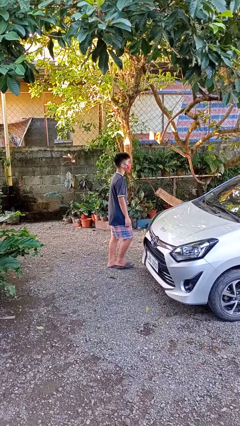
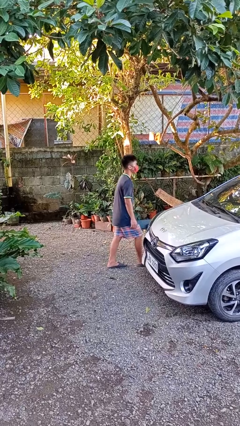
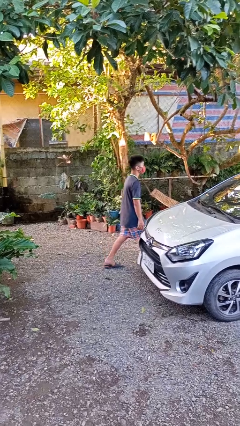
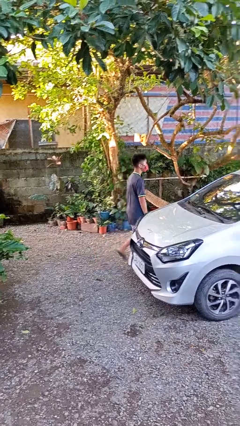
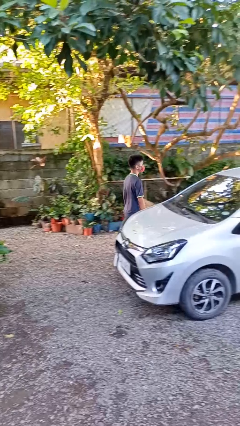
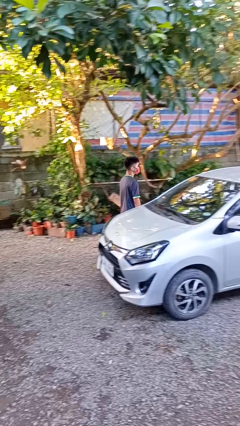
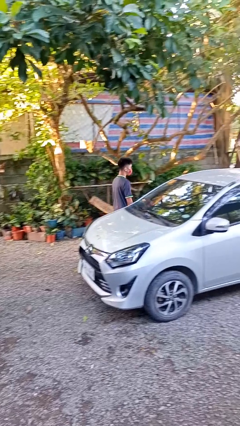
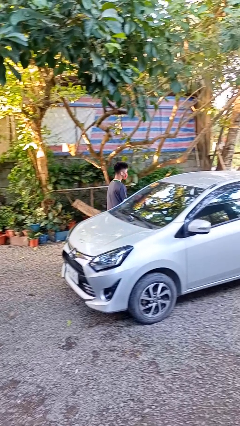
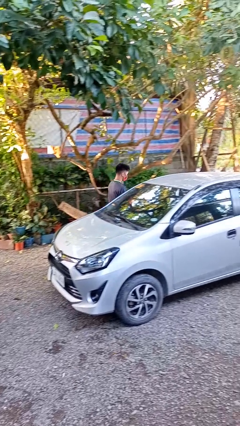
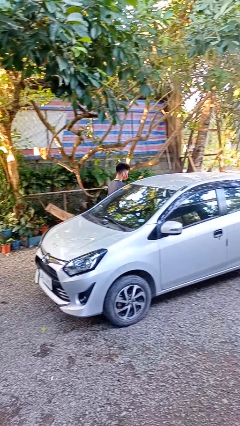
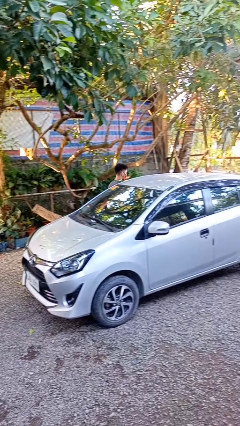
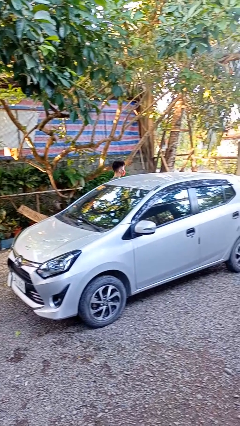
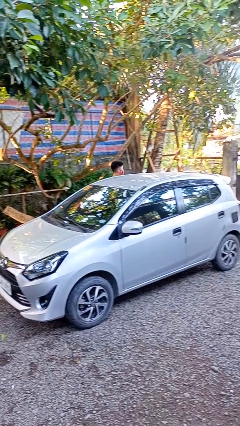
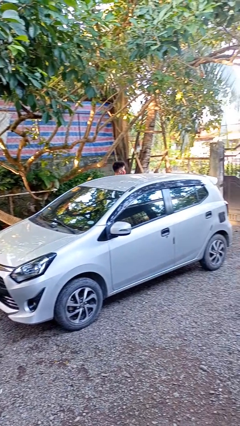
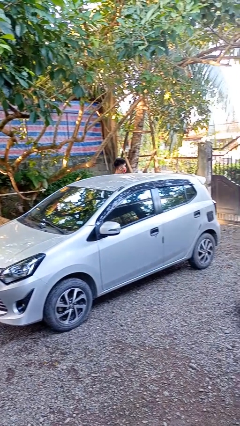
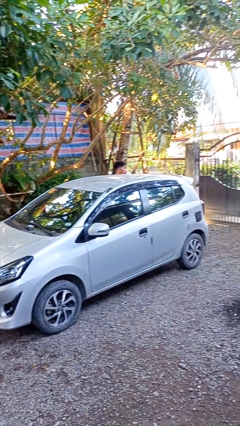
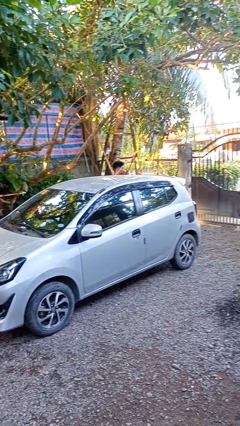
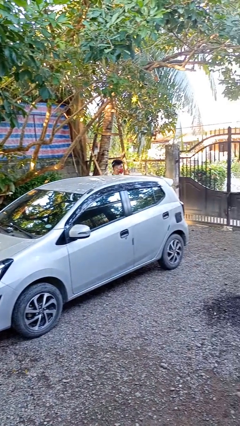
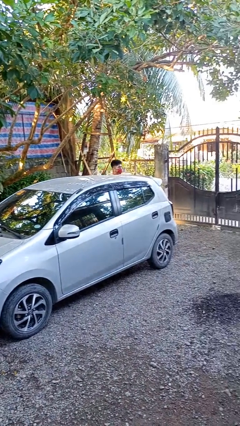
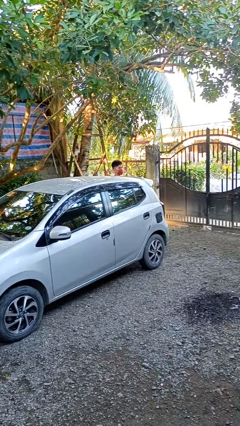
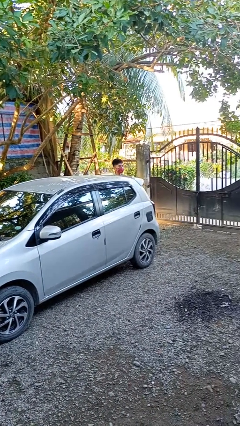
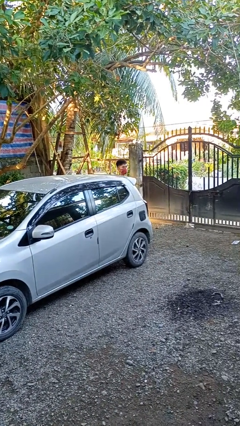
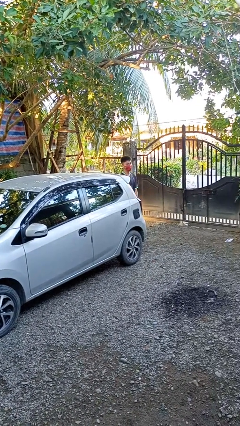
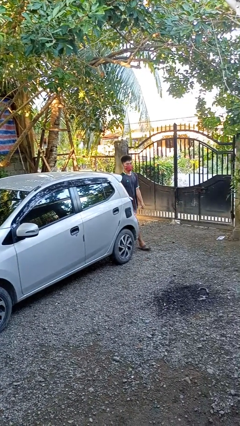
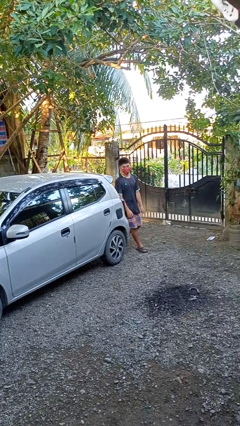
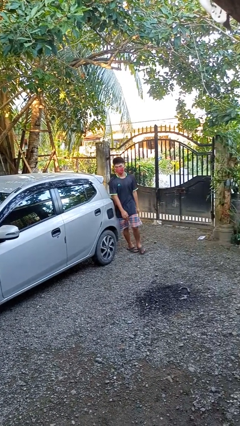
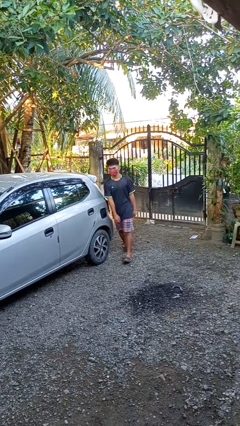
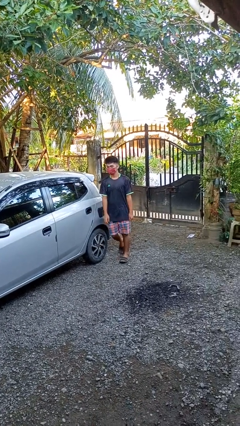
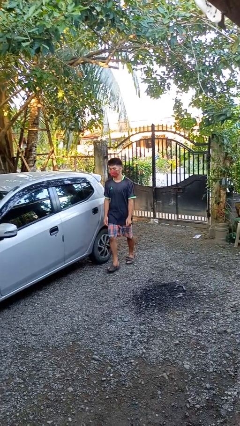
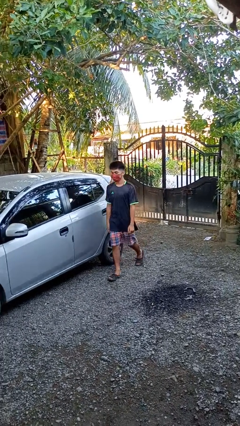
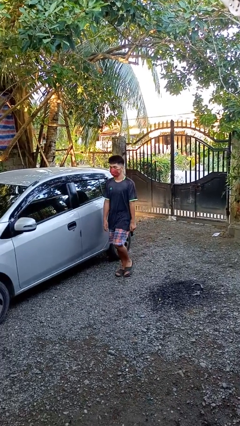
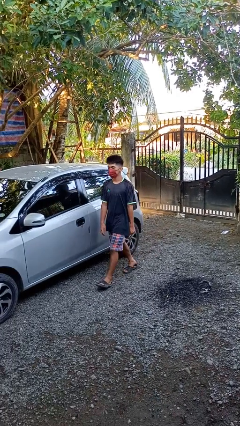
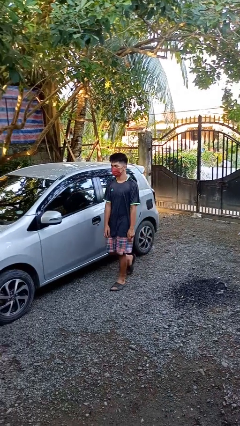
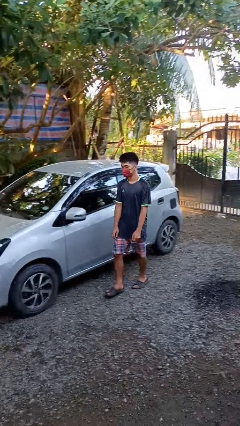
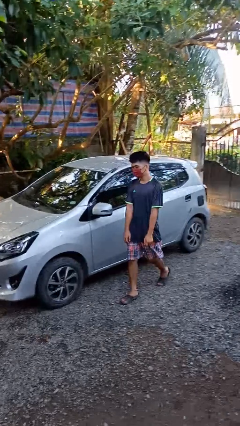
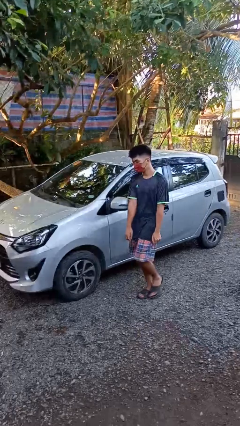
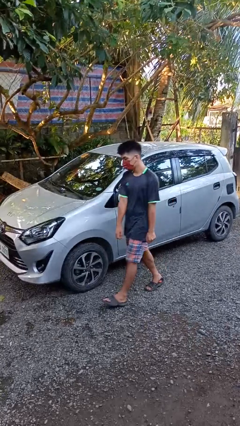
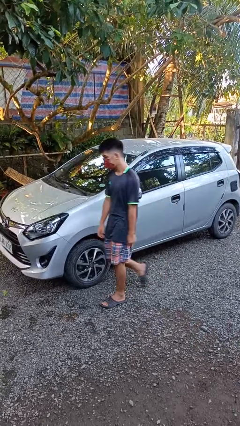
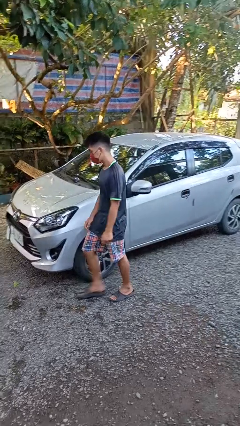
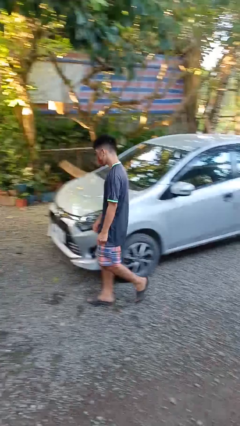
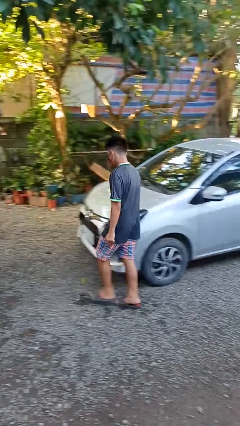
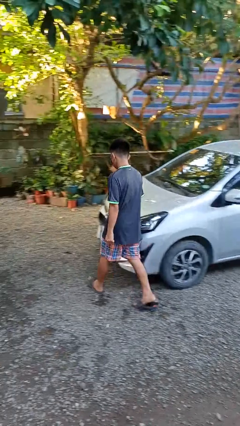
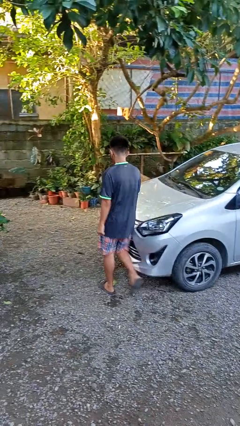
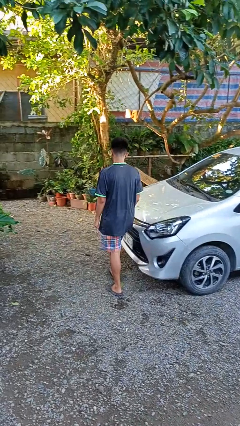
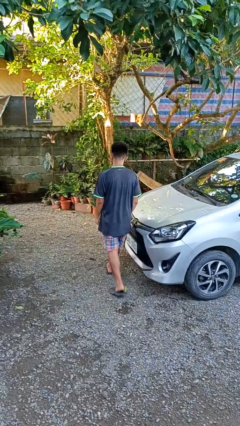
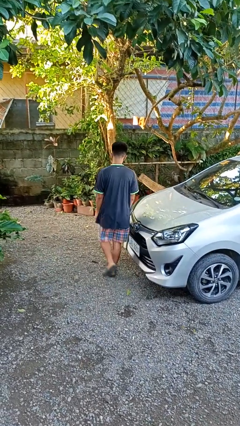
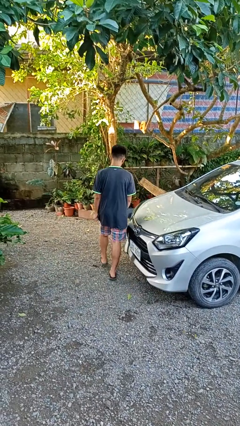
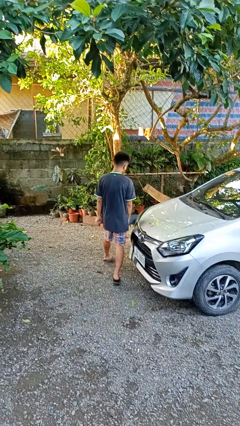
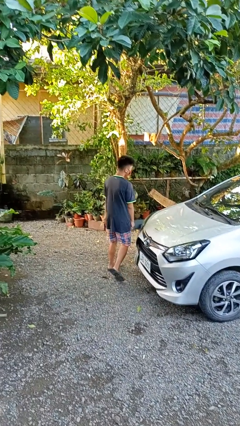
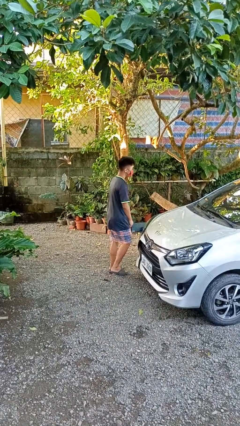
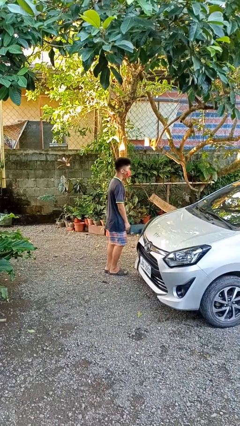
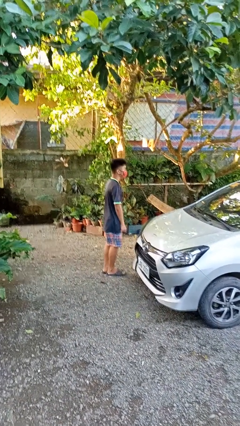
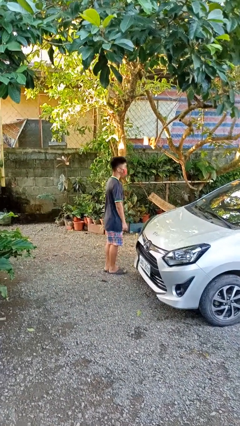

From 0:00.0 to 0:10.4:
person walks around car

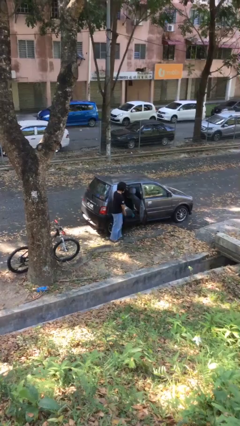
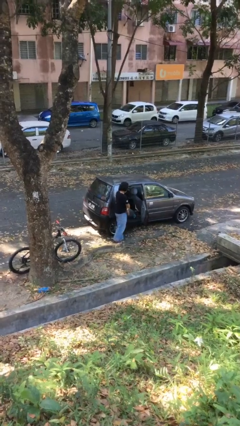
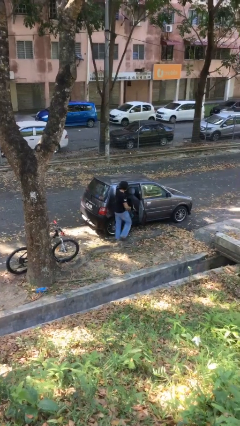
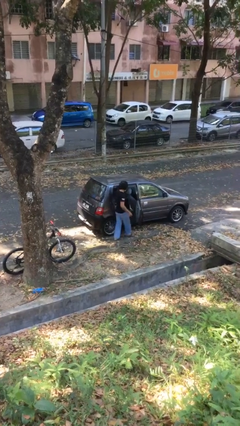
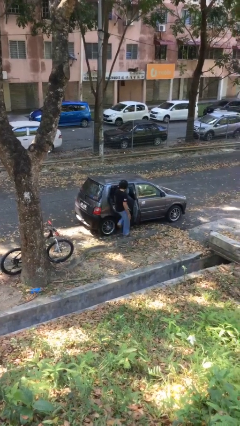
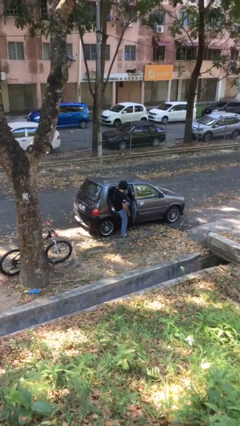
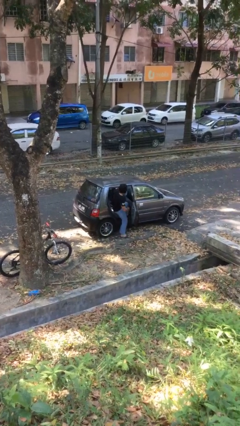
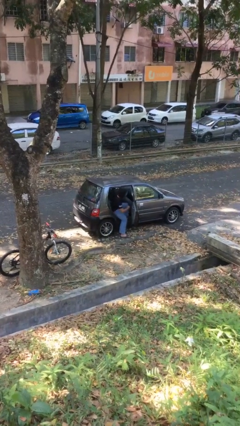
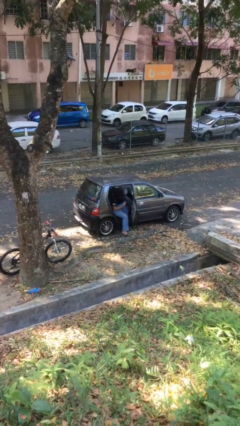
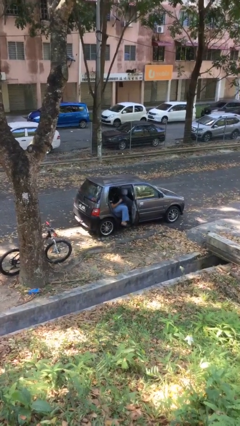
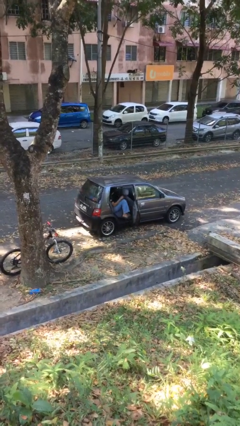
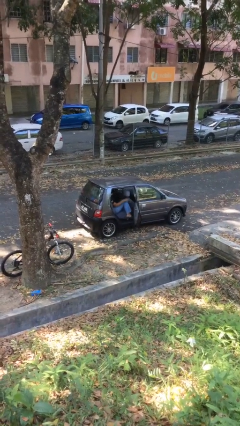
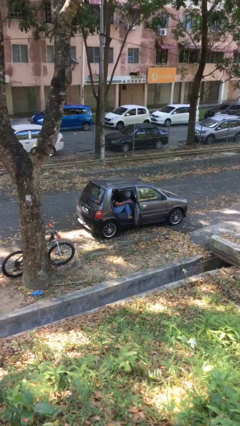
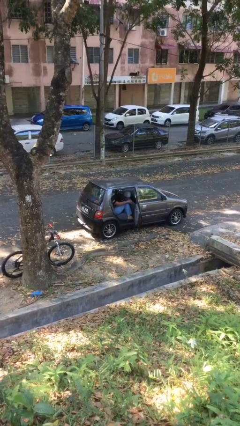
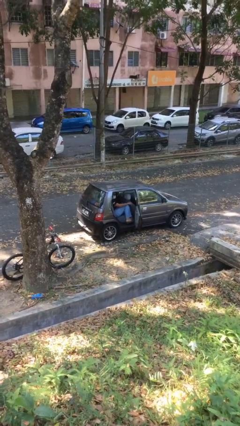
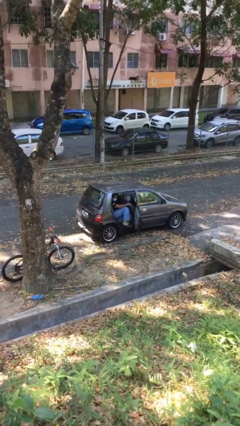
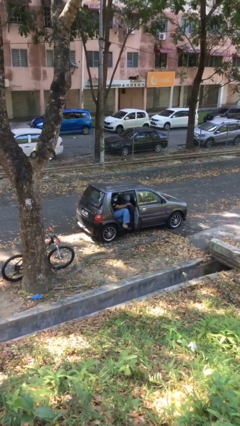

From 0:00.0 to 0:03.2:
person enters car

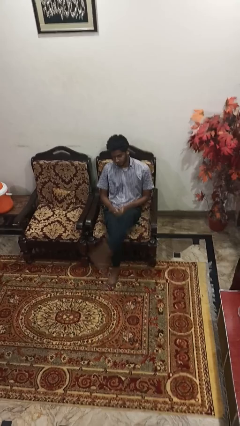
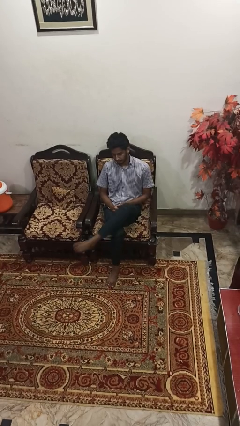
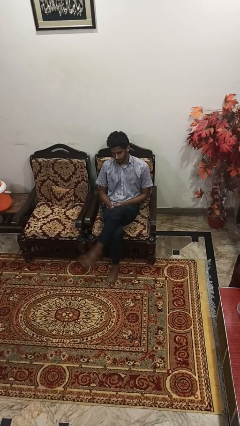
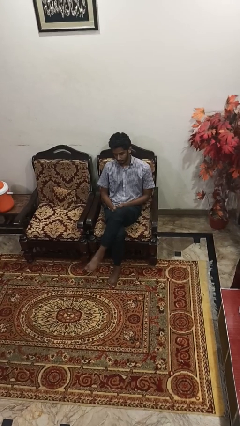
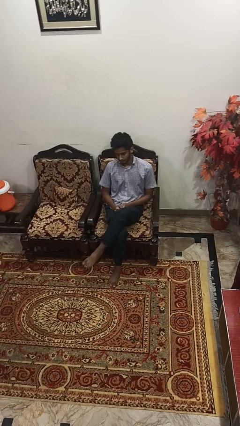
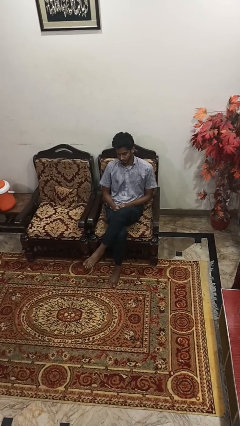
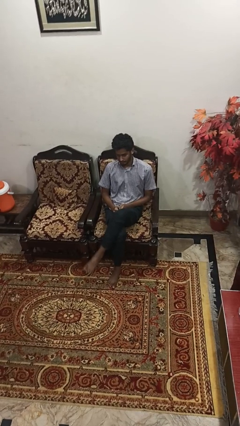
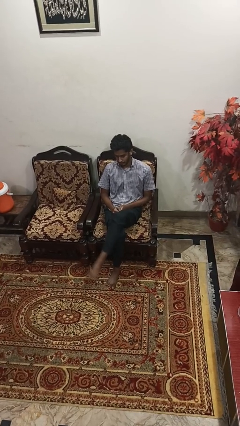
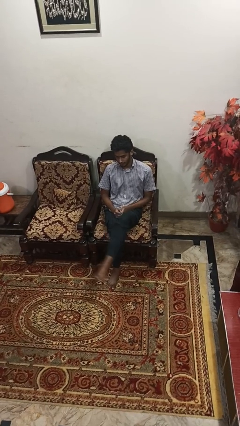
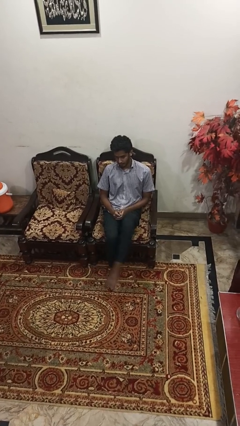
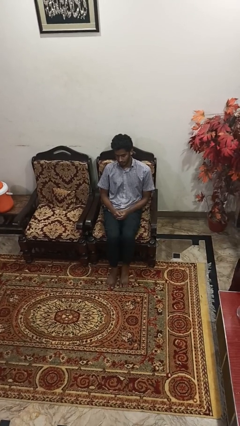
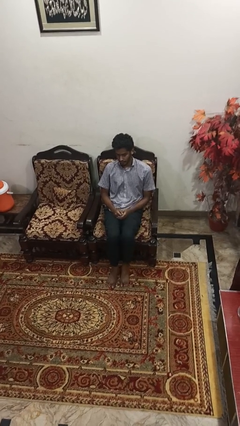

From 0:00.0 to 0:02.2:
person crosses legs

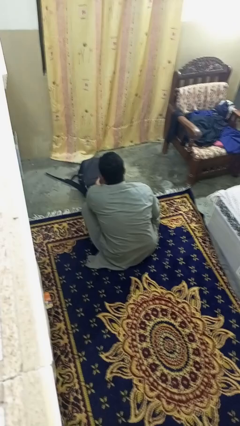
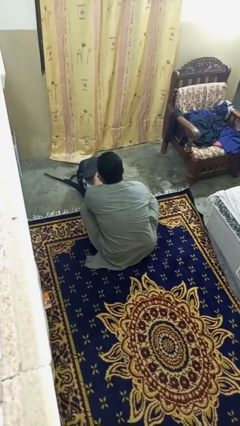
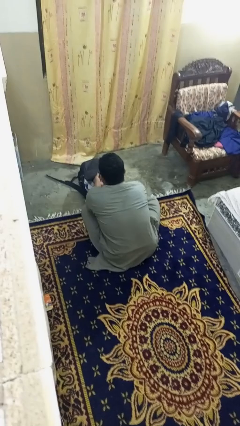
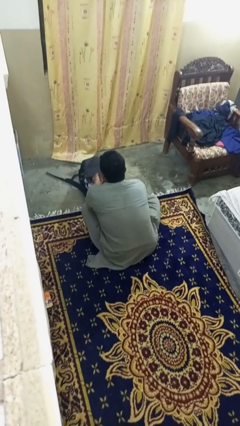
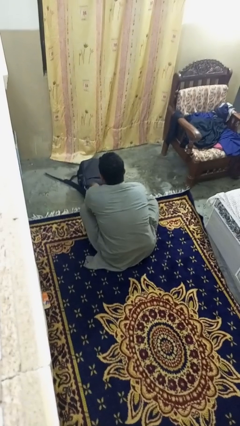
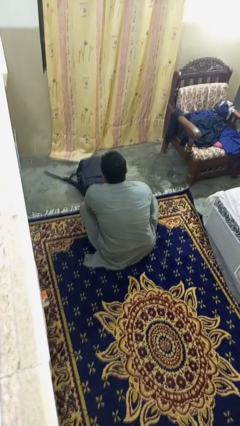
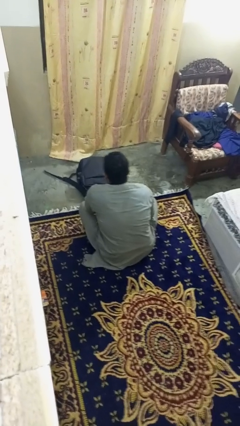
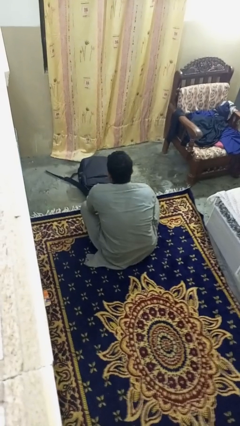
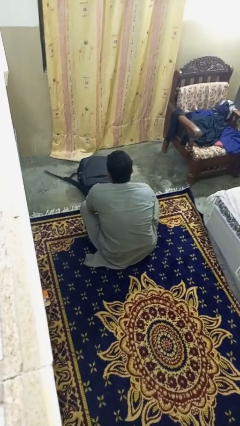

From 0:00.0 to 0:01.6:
person puts object into bag

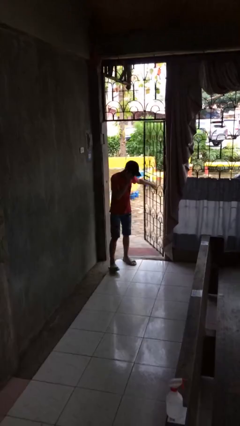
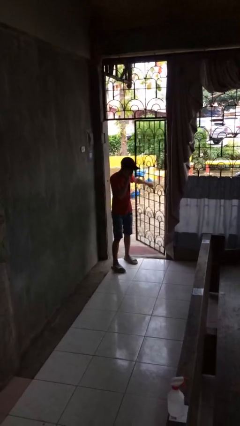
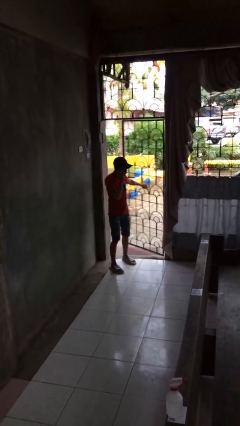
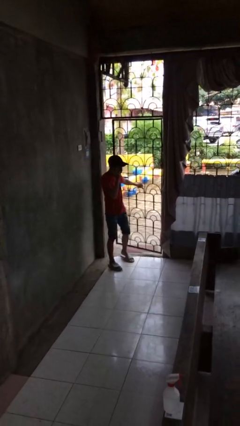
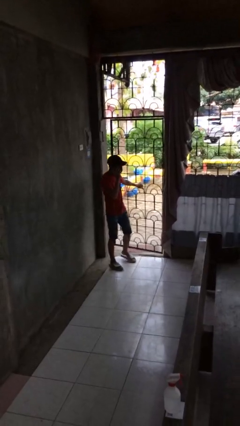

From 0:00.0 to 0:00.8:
person closes facility door
